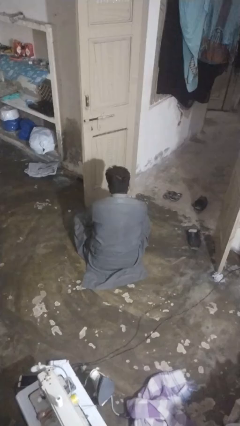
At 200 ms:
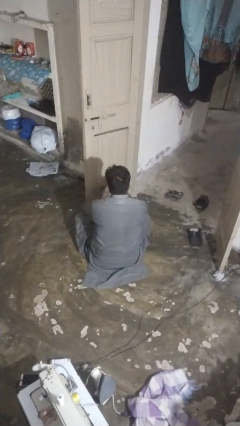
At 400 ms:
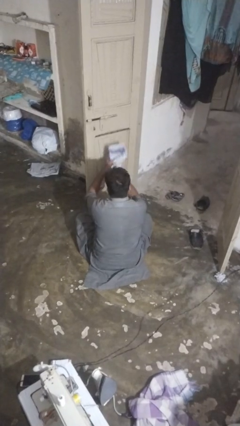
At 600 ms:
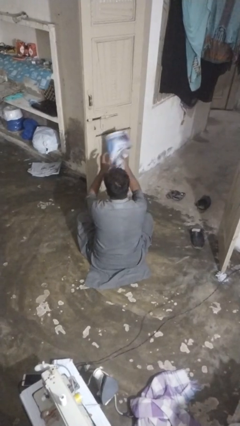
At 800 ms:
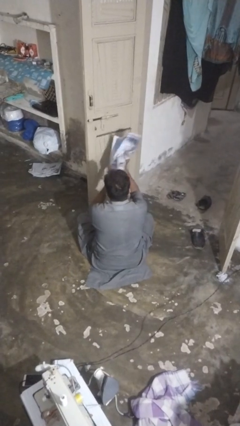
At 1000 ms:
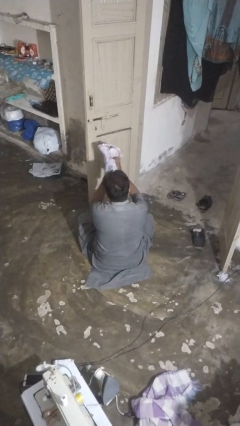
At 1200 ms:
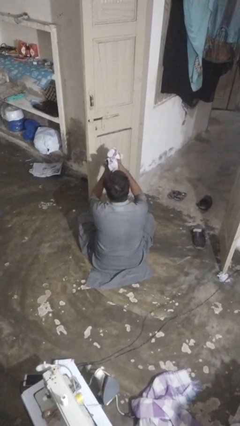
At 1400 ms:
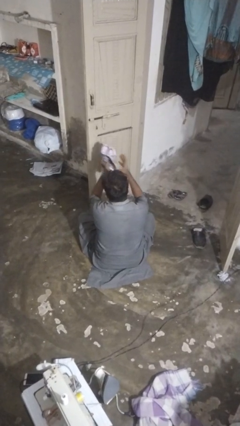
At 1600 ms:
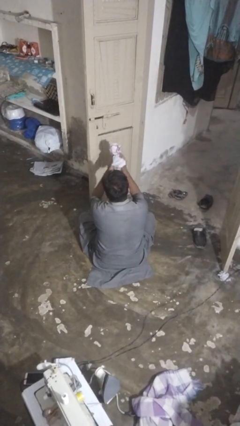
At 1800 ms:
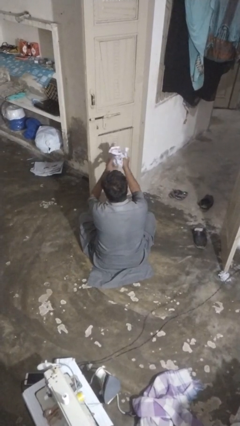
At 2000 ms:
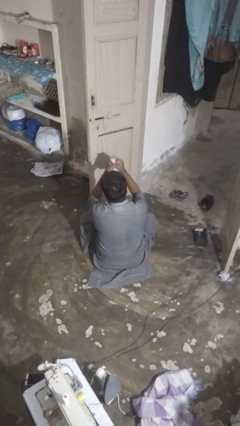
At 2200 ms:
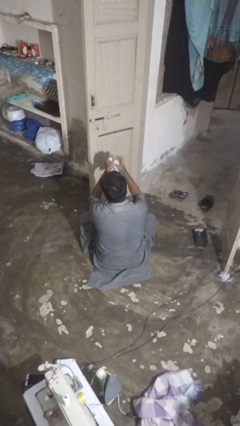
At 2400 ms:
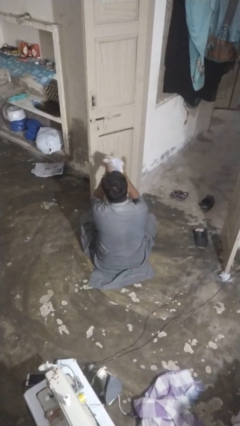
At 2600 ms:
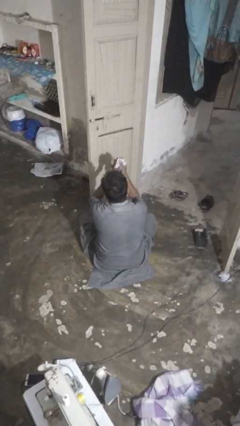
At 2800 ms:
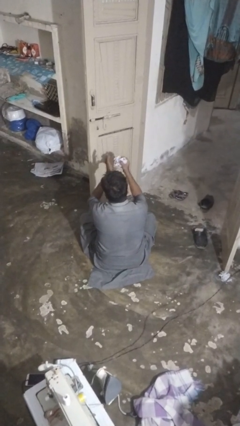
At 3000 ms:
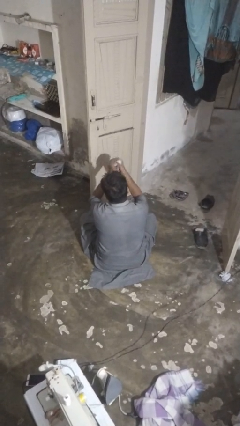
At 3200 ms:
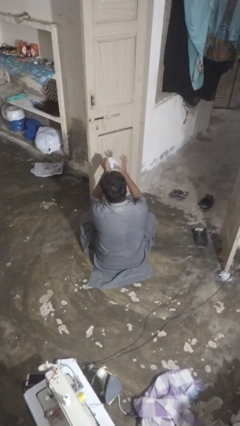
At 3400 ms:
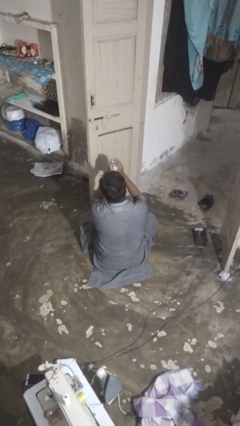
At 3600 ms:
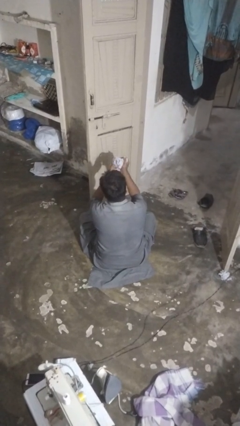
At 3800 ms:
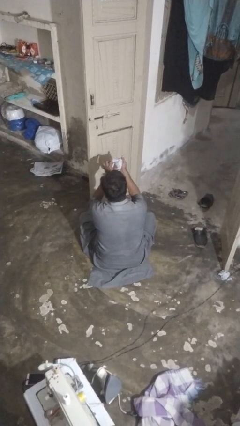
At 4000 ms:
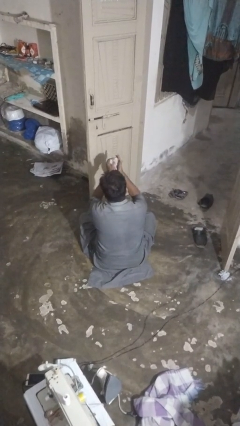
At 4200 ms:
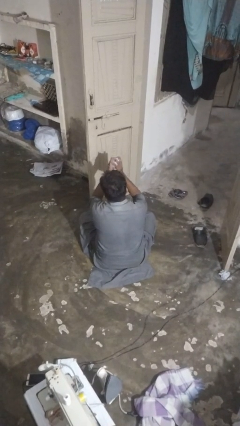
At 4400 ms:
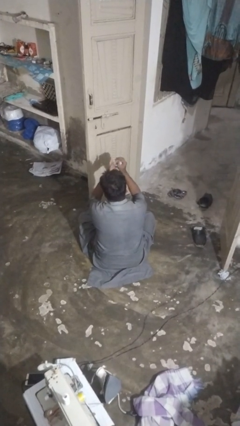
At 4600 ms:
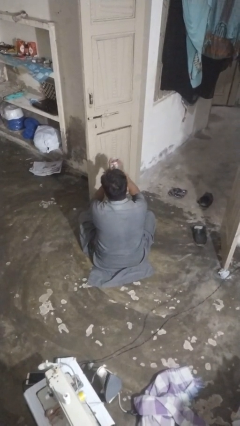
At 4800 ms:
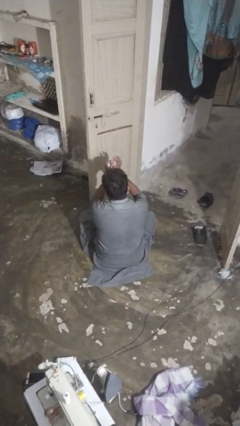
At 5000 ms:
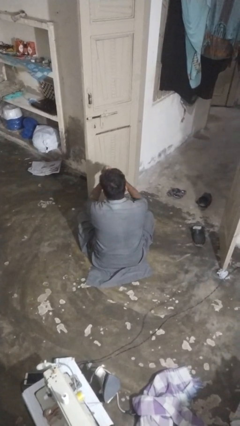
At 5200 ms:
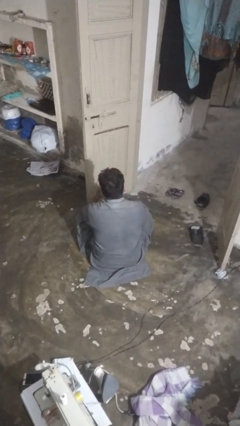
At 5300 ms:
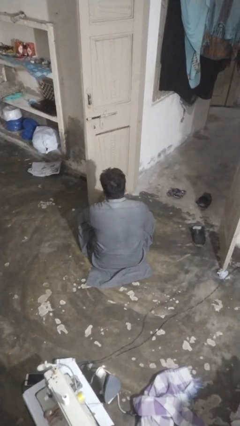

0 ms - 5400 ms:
person crumples paper

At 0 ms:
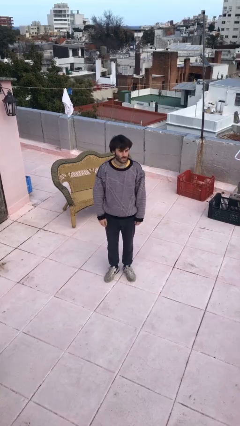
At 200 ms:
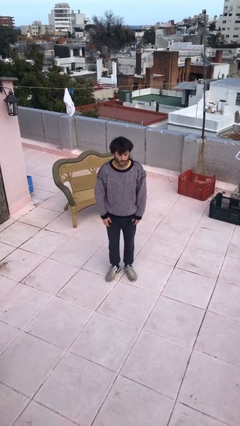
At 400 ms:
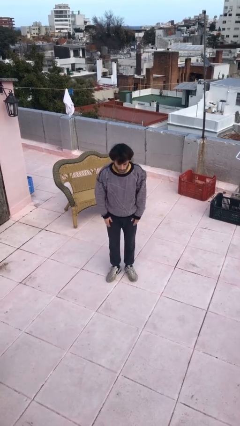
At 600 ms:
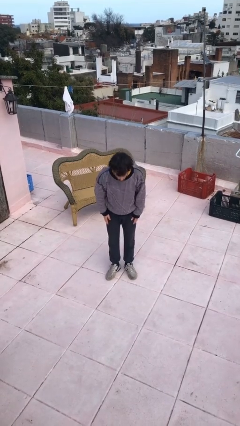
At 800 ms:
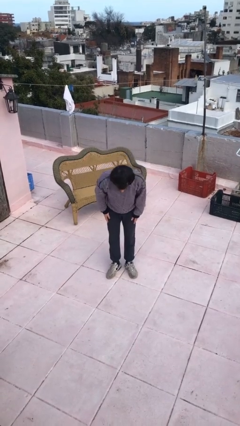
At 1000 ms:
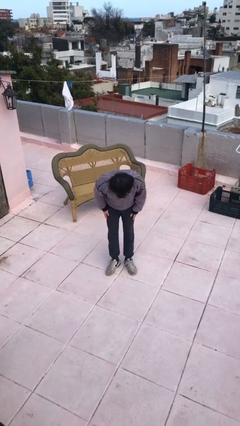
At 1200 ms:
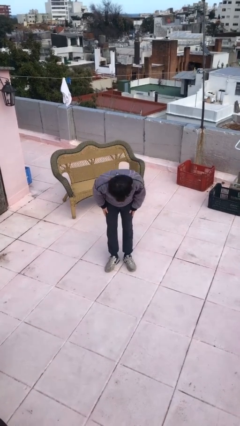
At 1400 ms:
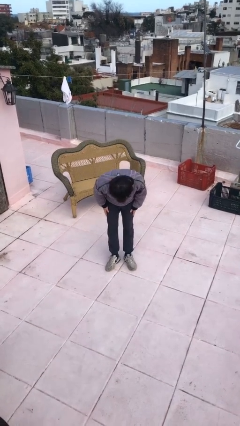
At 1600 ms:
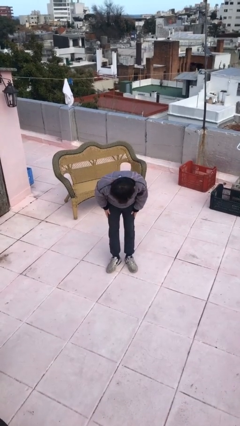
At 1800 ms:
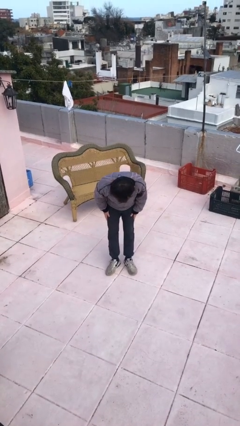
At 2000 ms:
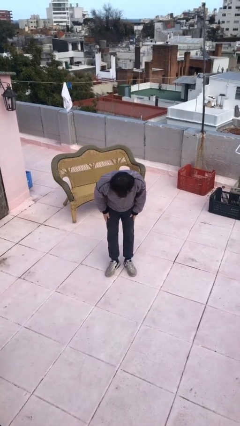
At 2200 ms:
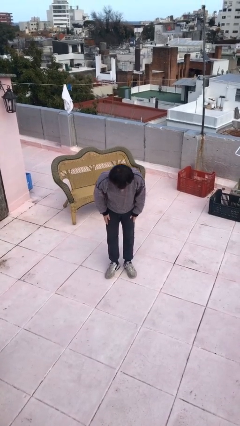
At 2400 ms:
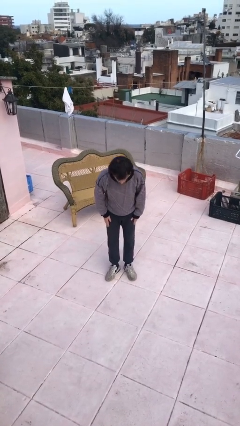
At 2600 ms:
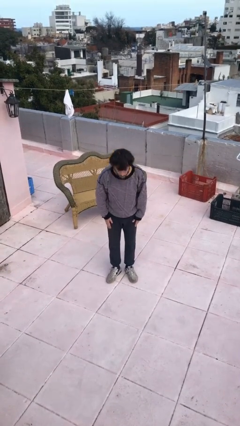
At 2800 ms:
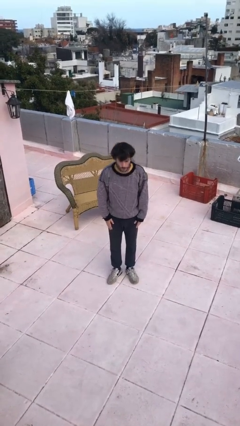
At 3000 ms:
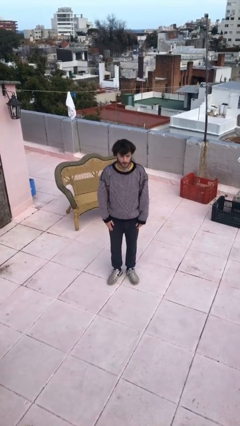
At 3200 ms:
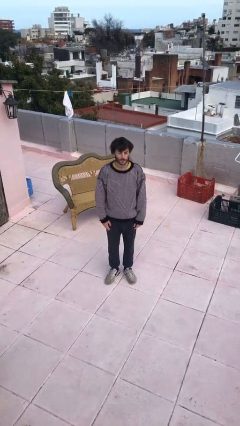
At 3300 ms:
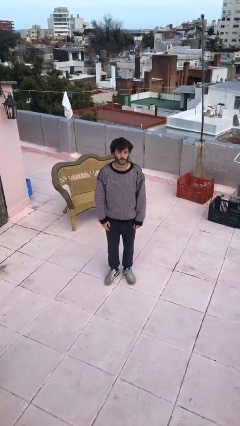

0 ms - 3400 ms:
person bows

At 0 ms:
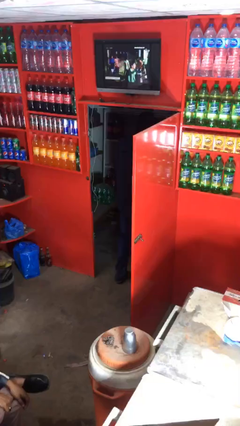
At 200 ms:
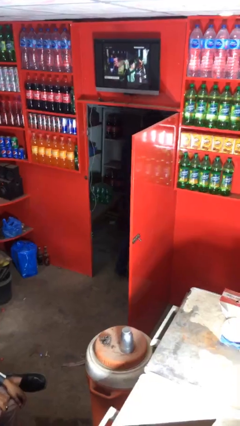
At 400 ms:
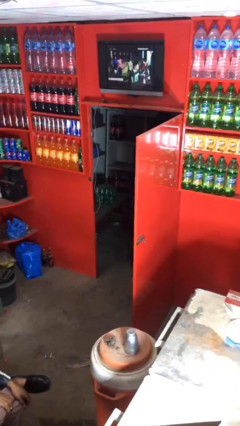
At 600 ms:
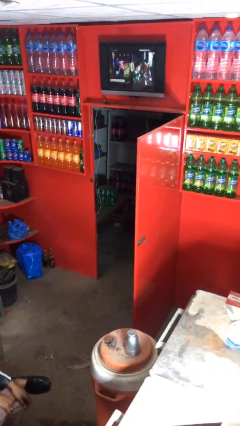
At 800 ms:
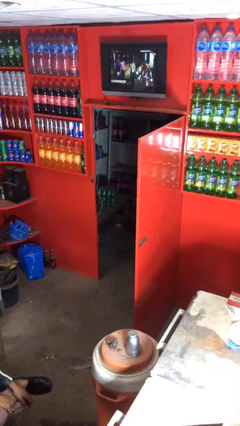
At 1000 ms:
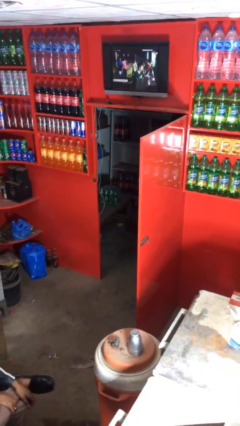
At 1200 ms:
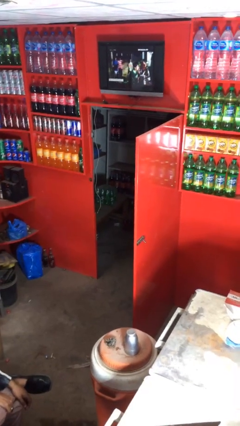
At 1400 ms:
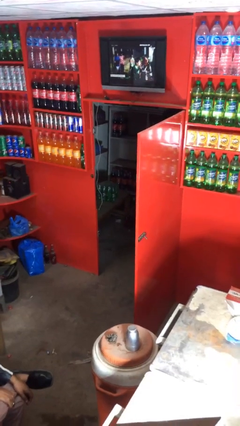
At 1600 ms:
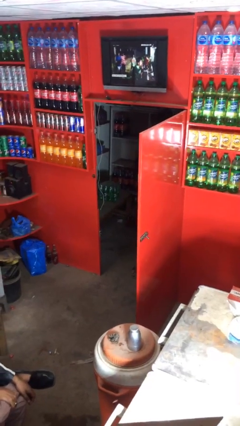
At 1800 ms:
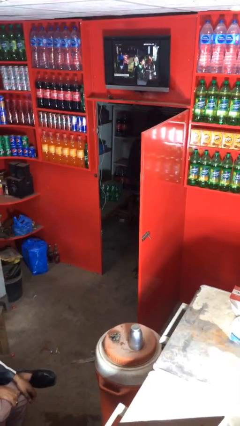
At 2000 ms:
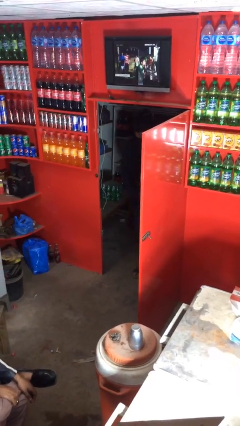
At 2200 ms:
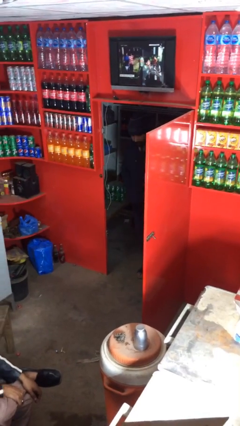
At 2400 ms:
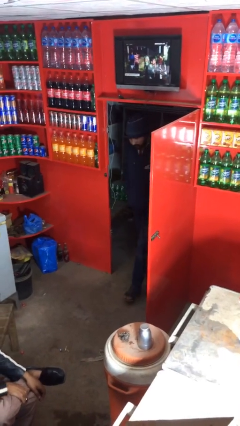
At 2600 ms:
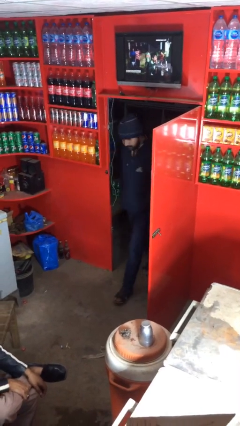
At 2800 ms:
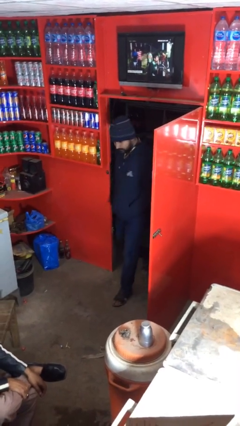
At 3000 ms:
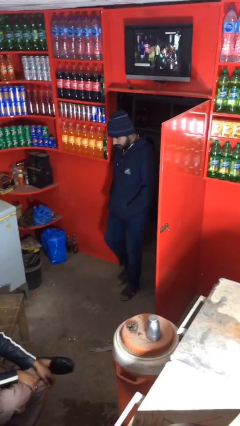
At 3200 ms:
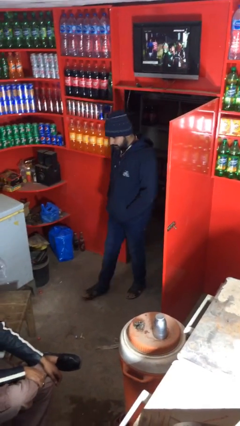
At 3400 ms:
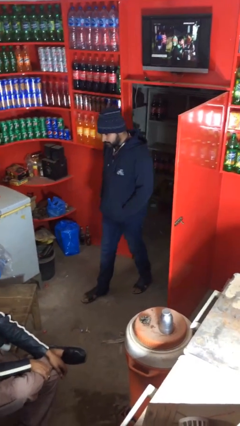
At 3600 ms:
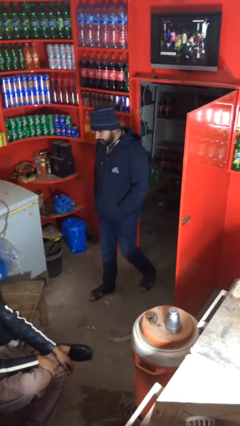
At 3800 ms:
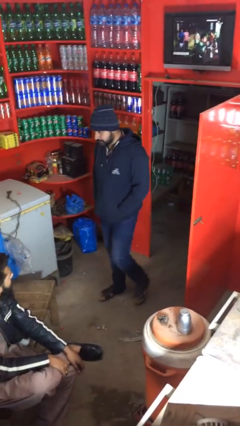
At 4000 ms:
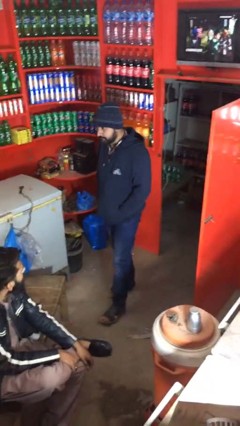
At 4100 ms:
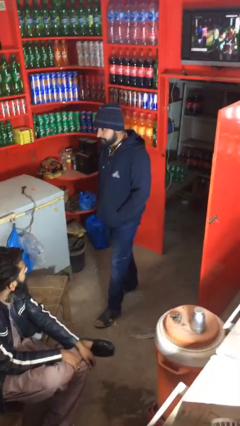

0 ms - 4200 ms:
person exits scene through structure

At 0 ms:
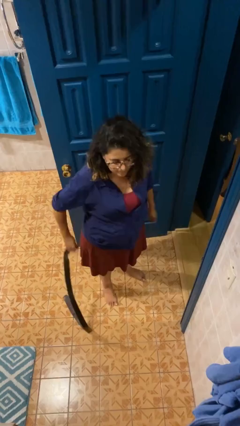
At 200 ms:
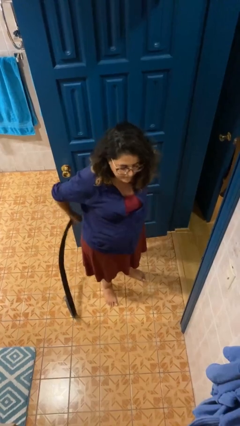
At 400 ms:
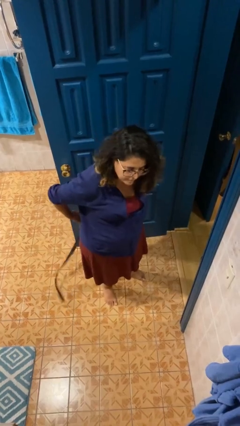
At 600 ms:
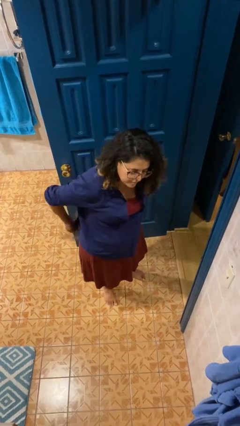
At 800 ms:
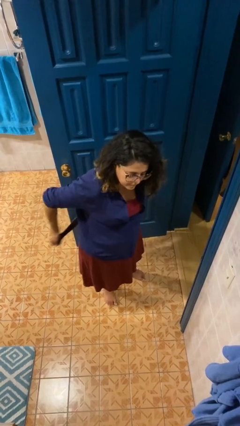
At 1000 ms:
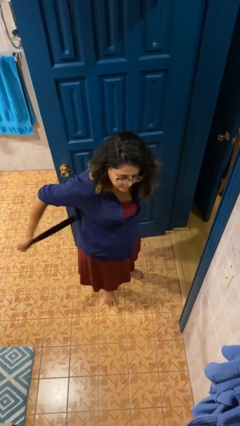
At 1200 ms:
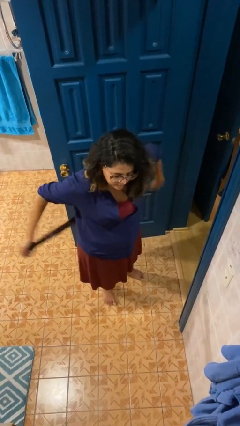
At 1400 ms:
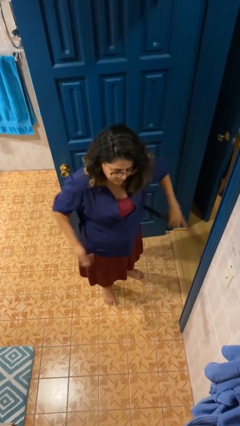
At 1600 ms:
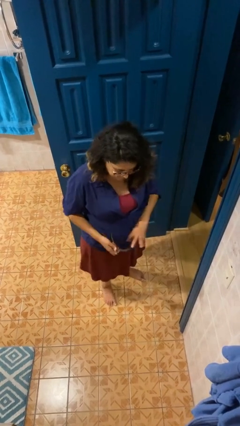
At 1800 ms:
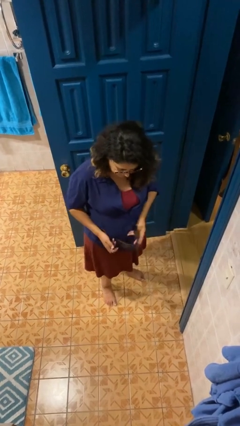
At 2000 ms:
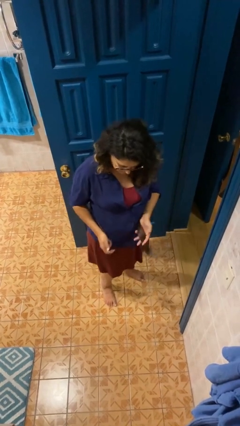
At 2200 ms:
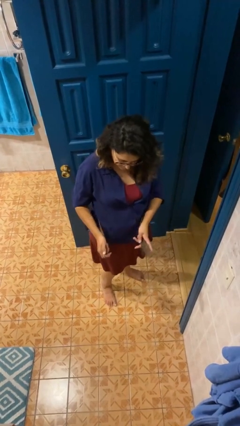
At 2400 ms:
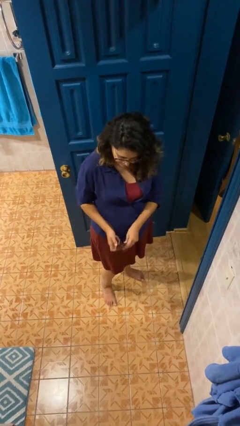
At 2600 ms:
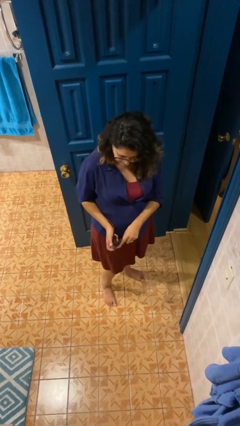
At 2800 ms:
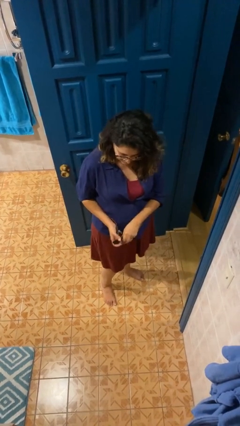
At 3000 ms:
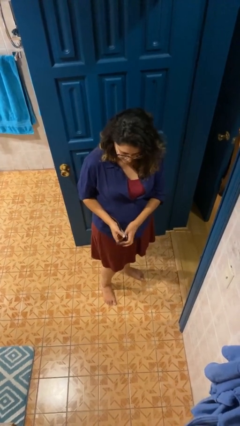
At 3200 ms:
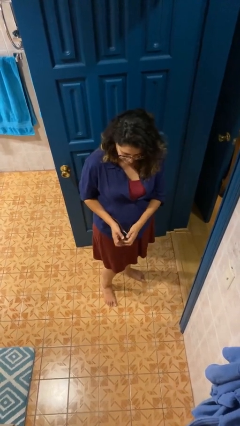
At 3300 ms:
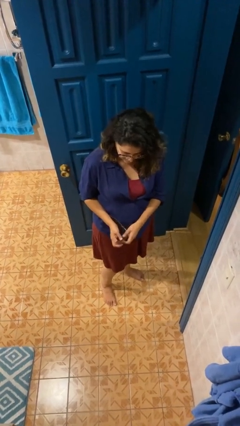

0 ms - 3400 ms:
person puts on belt

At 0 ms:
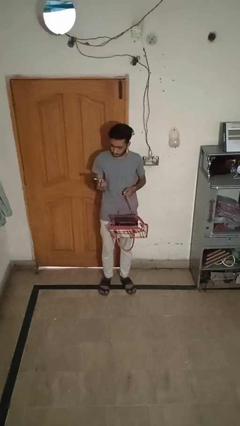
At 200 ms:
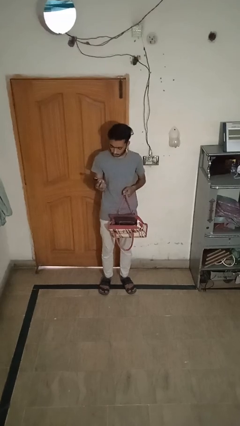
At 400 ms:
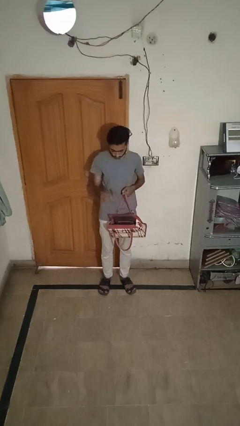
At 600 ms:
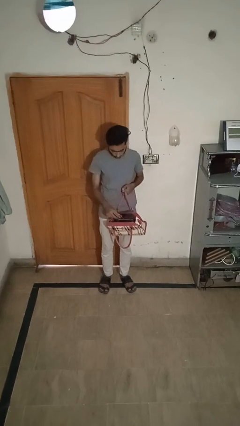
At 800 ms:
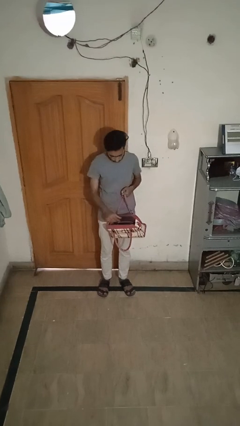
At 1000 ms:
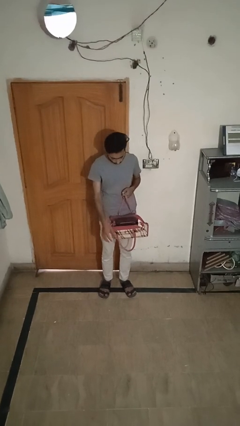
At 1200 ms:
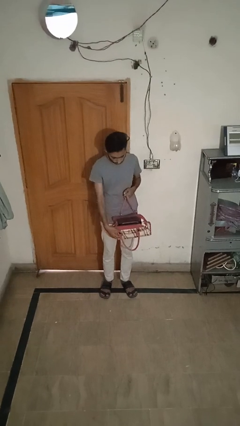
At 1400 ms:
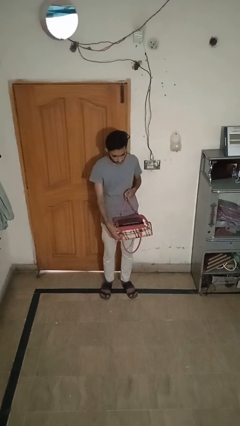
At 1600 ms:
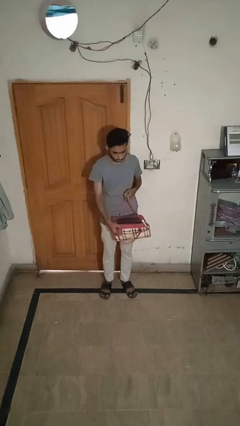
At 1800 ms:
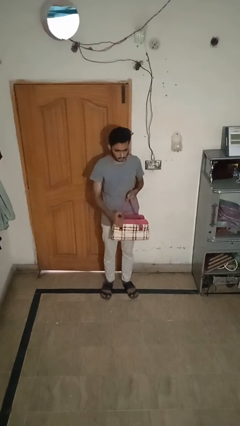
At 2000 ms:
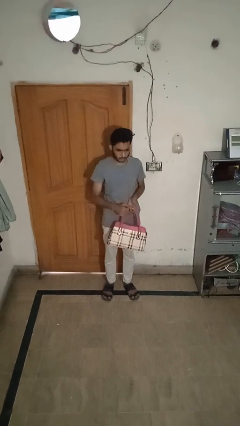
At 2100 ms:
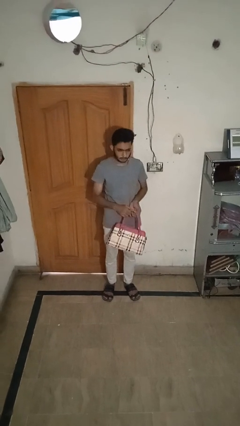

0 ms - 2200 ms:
person puts object into purse
